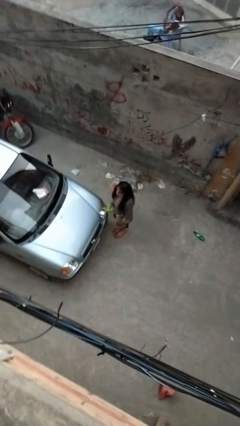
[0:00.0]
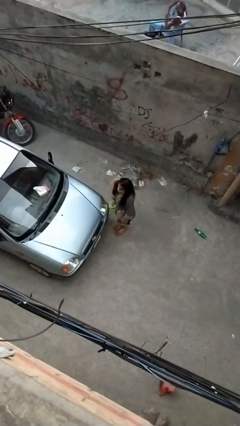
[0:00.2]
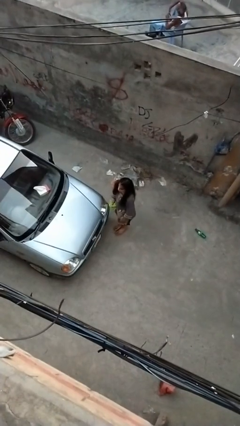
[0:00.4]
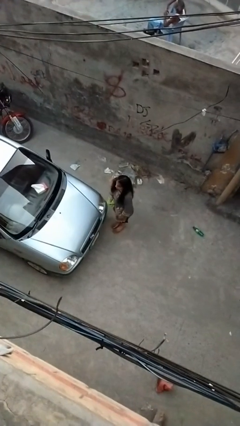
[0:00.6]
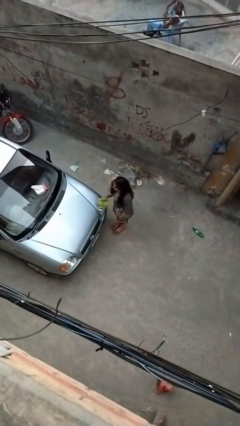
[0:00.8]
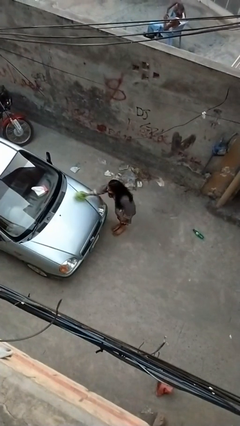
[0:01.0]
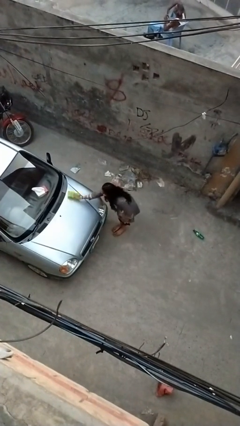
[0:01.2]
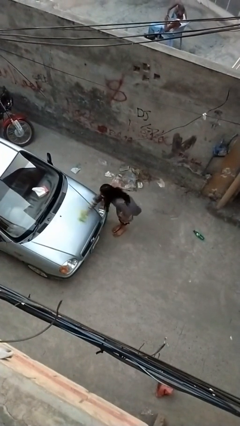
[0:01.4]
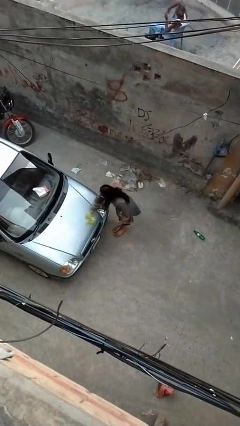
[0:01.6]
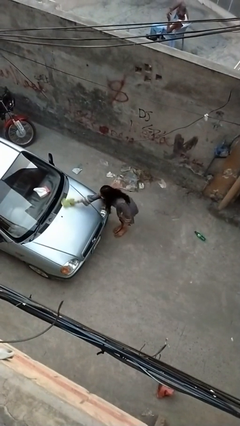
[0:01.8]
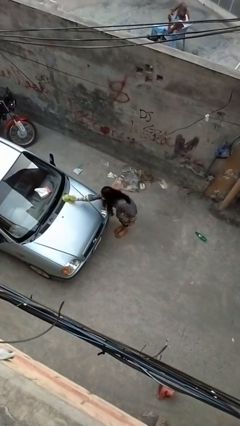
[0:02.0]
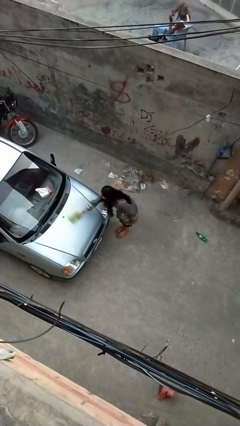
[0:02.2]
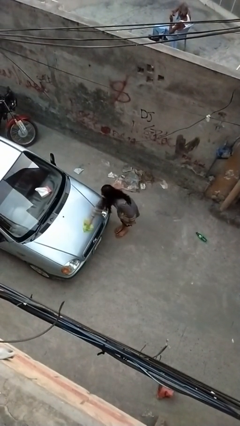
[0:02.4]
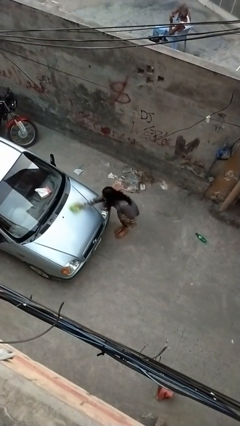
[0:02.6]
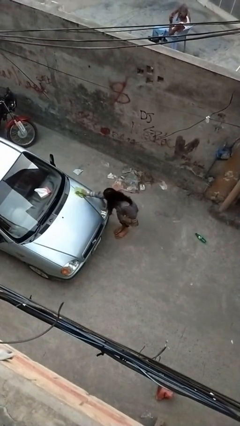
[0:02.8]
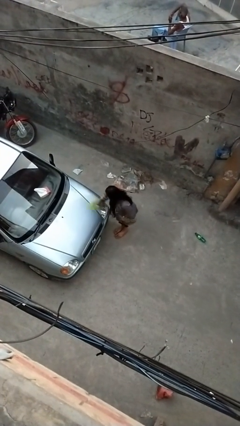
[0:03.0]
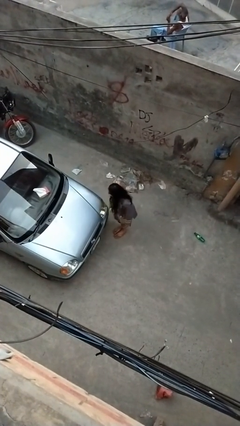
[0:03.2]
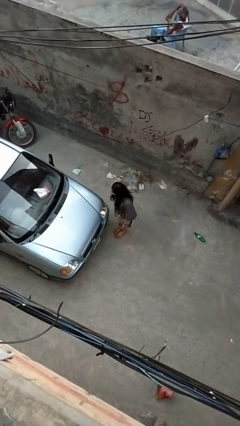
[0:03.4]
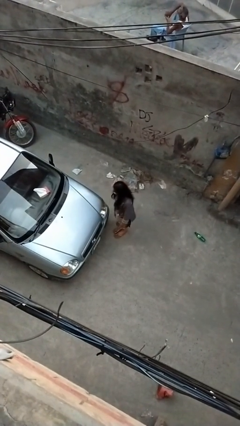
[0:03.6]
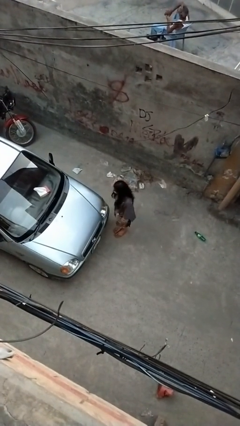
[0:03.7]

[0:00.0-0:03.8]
person polishes car with rag

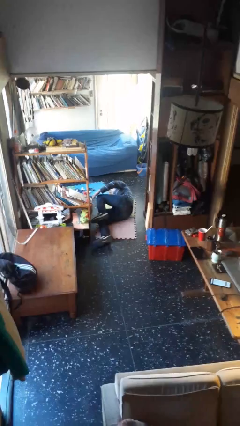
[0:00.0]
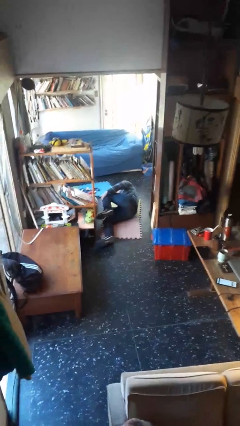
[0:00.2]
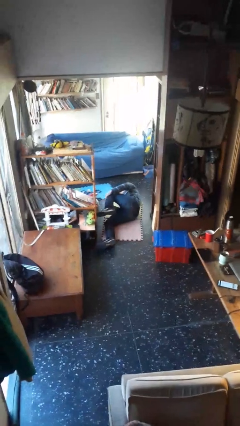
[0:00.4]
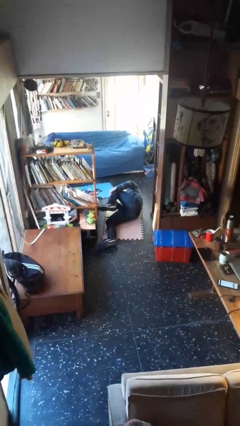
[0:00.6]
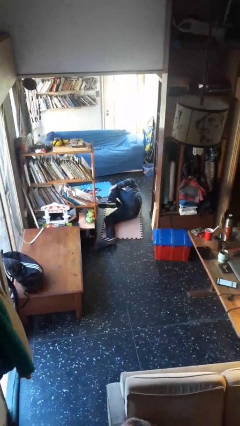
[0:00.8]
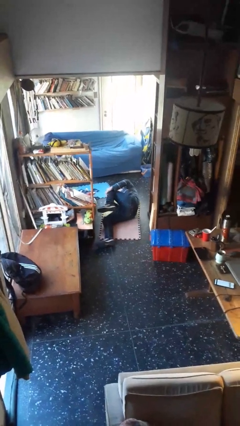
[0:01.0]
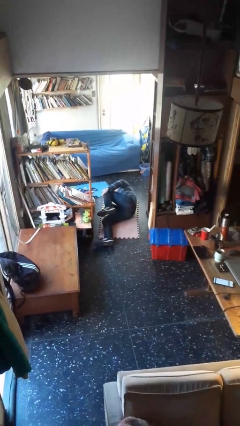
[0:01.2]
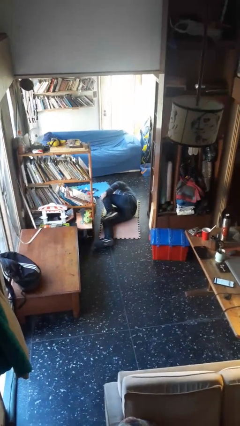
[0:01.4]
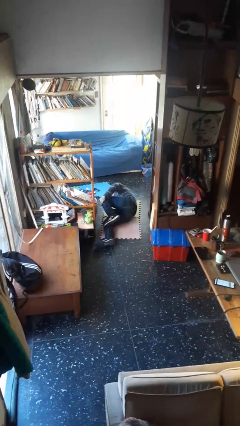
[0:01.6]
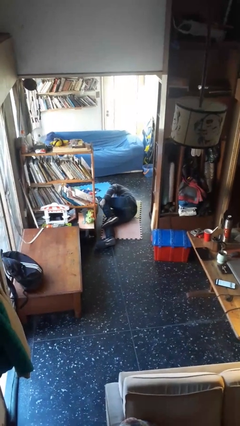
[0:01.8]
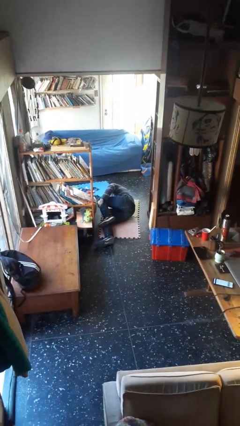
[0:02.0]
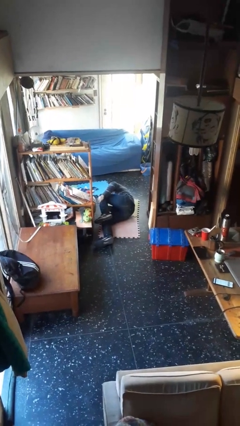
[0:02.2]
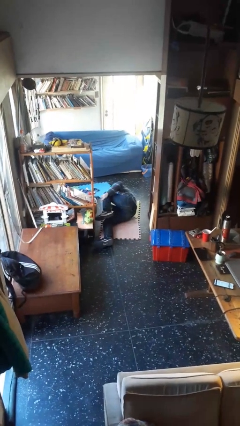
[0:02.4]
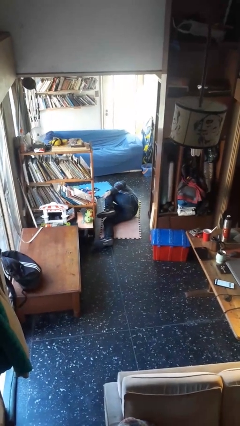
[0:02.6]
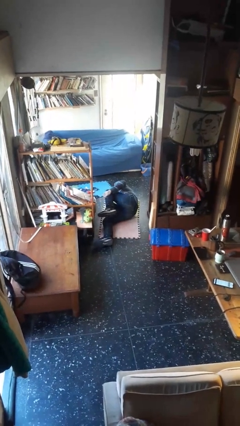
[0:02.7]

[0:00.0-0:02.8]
person lies down on floor

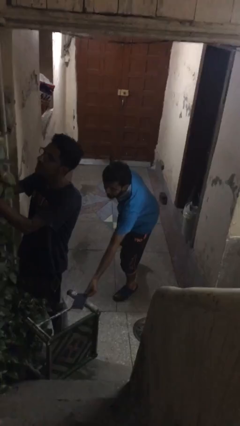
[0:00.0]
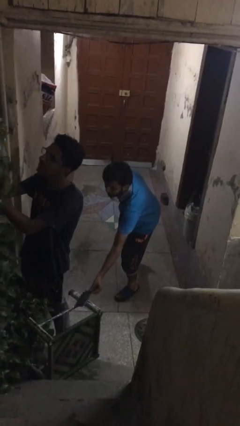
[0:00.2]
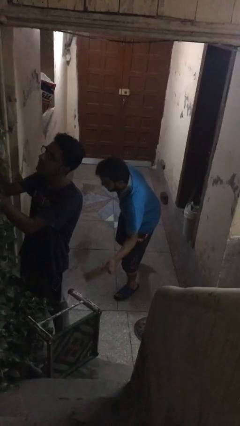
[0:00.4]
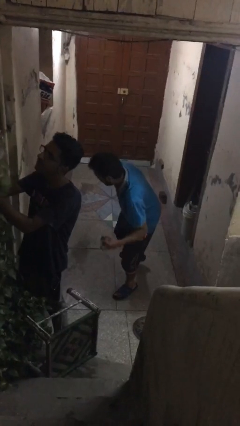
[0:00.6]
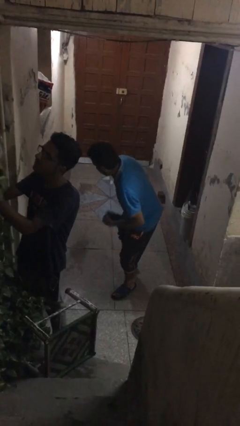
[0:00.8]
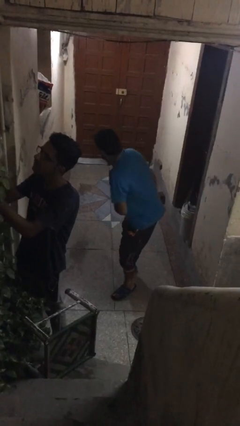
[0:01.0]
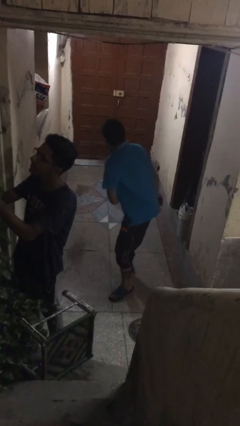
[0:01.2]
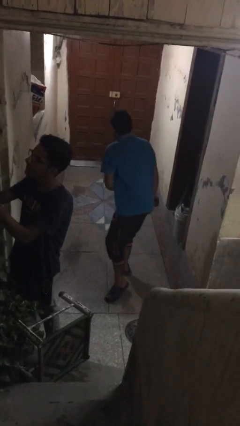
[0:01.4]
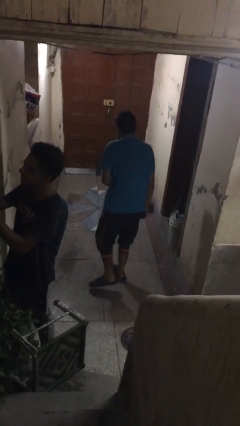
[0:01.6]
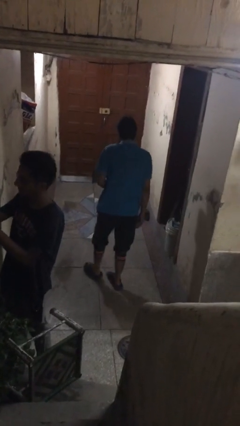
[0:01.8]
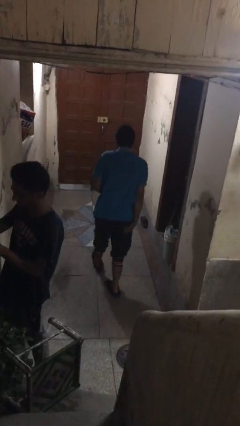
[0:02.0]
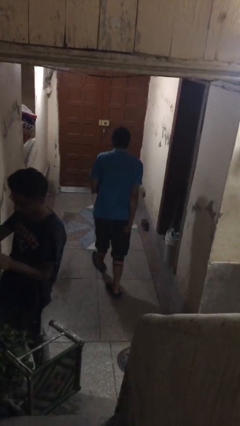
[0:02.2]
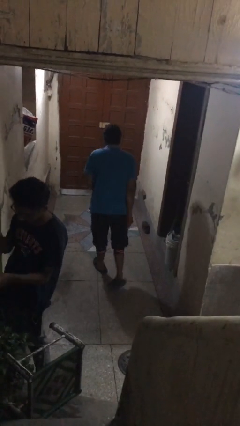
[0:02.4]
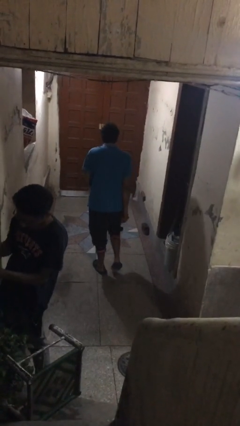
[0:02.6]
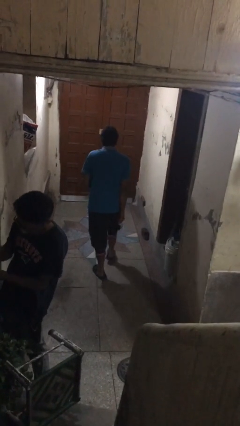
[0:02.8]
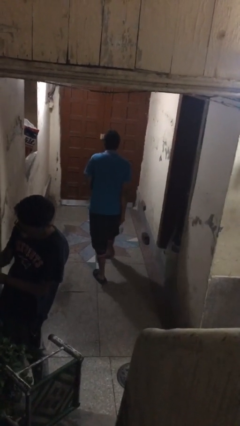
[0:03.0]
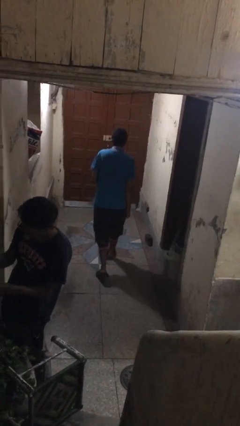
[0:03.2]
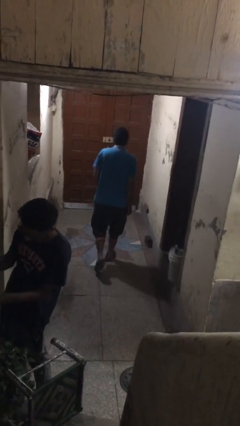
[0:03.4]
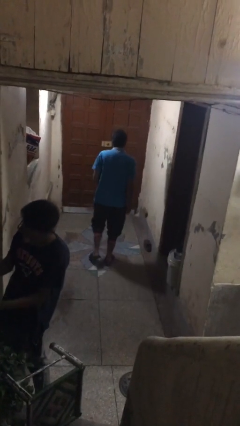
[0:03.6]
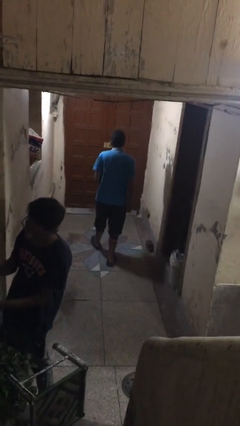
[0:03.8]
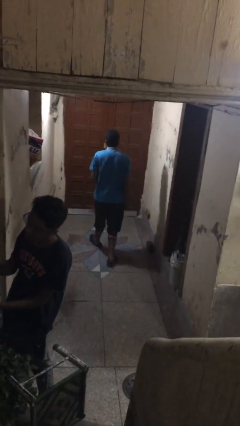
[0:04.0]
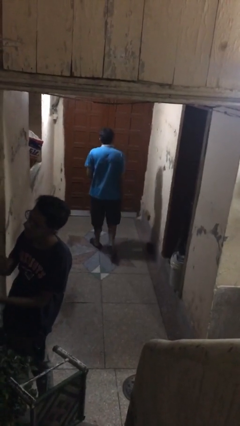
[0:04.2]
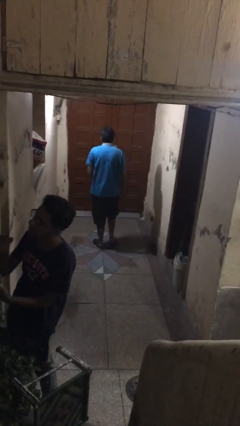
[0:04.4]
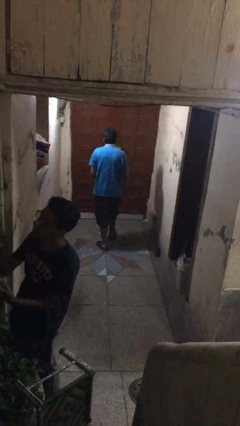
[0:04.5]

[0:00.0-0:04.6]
person steals object from person

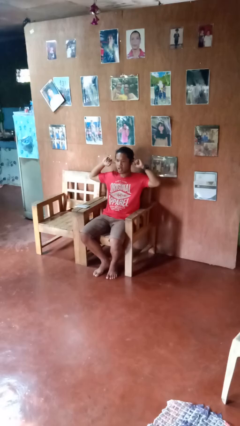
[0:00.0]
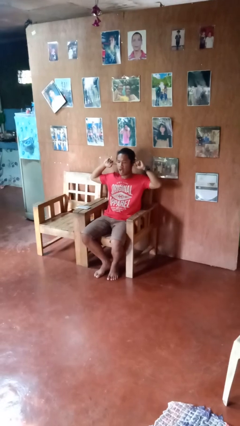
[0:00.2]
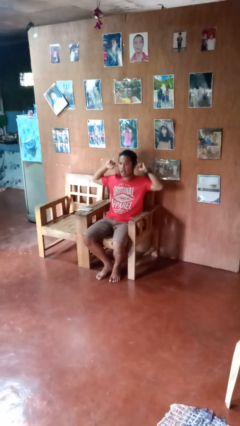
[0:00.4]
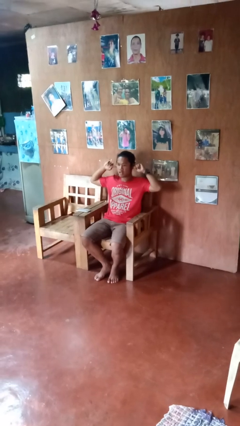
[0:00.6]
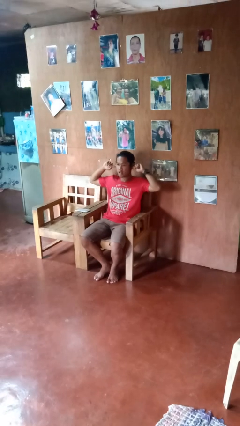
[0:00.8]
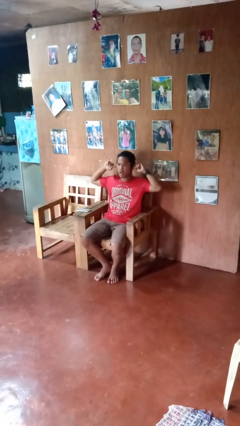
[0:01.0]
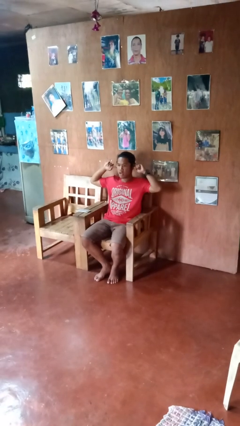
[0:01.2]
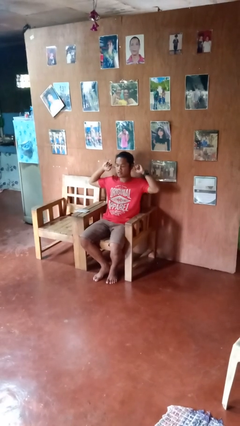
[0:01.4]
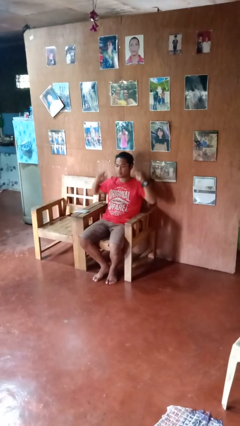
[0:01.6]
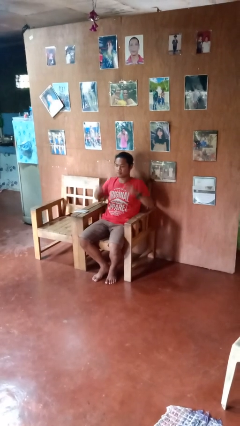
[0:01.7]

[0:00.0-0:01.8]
person puts fingers in ear

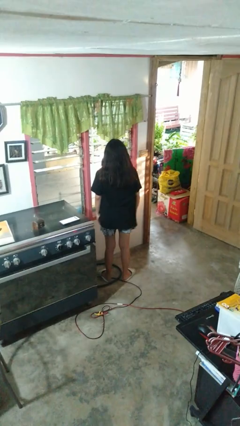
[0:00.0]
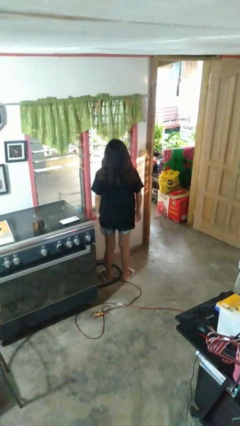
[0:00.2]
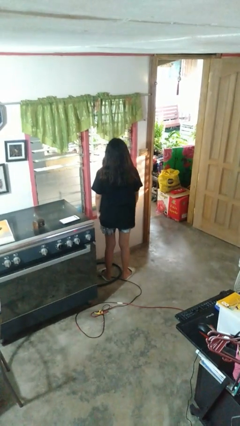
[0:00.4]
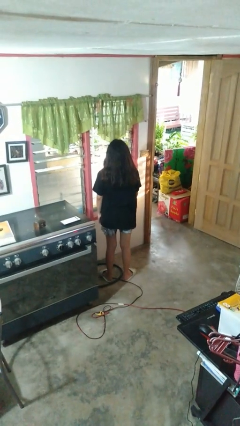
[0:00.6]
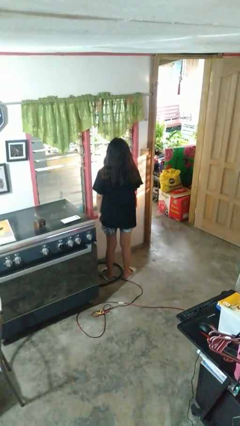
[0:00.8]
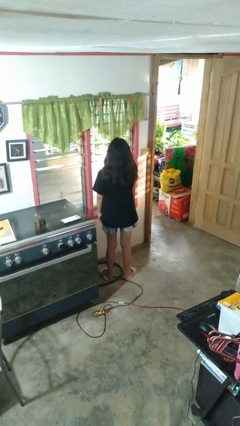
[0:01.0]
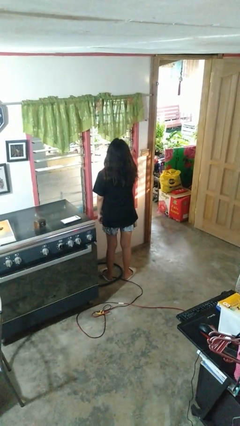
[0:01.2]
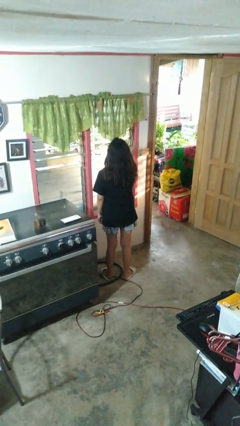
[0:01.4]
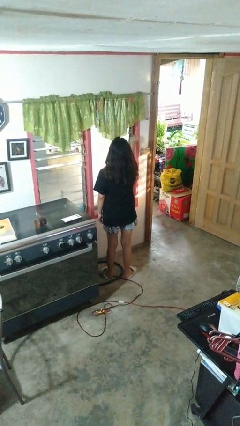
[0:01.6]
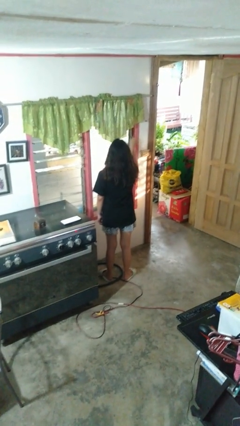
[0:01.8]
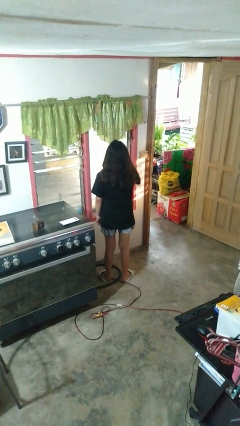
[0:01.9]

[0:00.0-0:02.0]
person closes home window

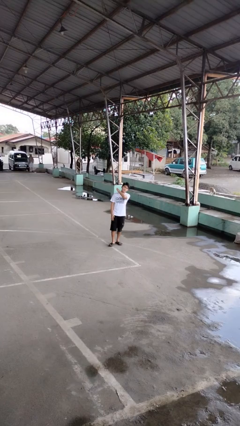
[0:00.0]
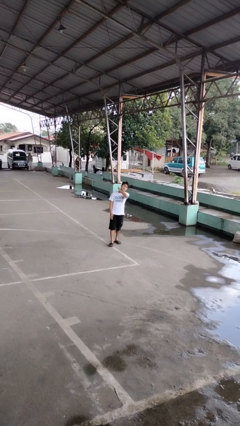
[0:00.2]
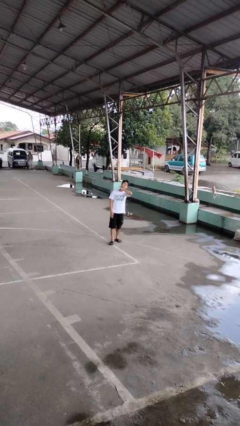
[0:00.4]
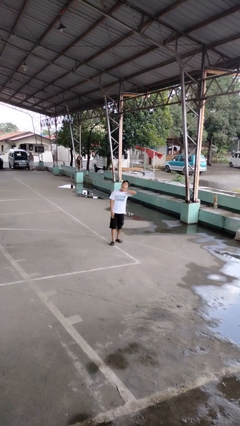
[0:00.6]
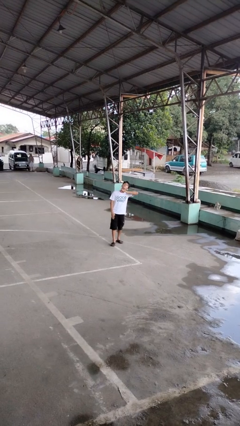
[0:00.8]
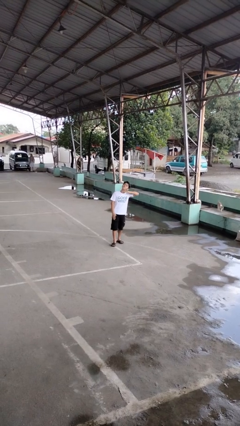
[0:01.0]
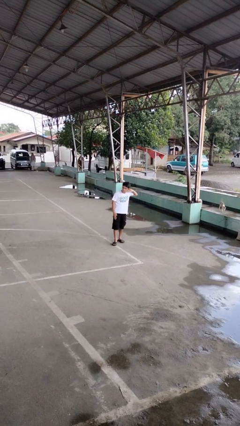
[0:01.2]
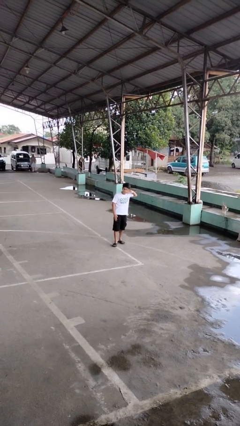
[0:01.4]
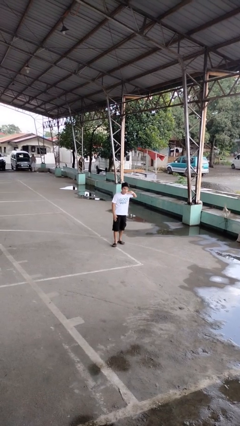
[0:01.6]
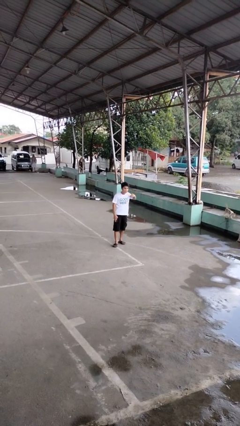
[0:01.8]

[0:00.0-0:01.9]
person gestures cut

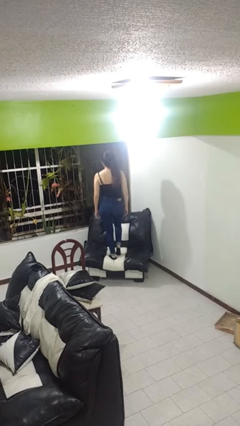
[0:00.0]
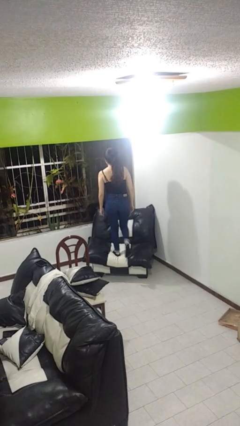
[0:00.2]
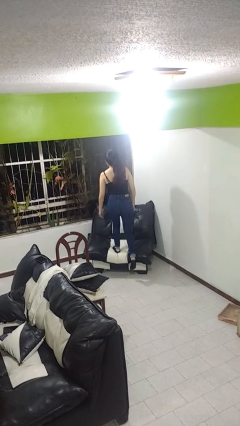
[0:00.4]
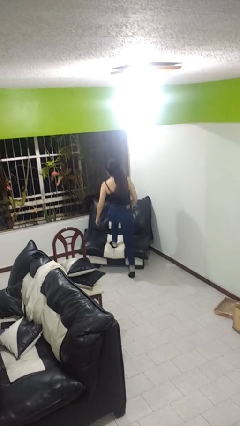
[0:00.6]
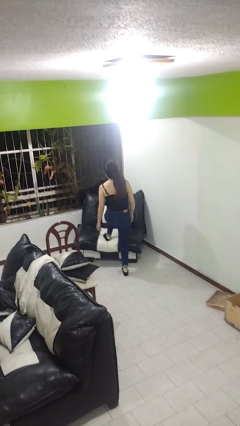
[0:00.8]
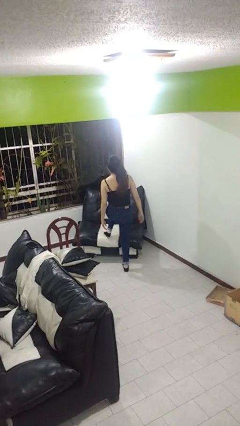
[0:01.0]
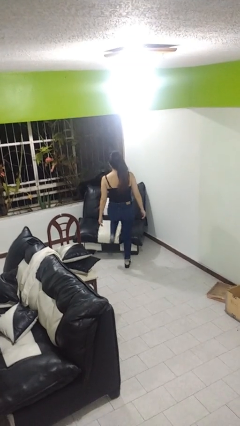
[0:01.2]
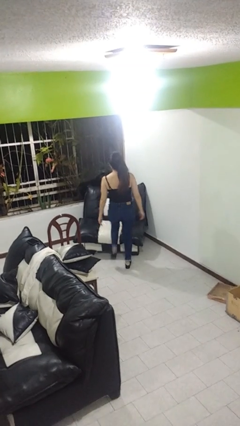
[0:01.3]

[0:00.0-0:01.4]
person climbs off couch
